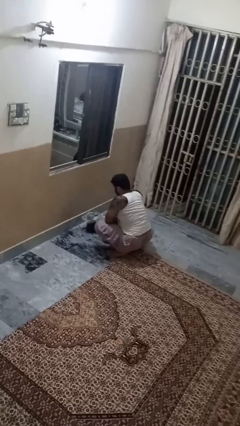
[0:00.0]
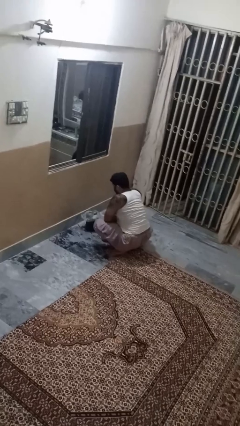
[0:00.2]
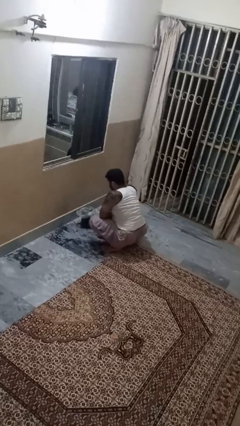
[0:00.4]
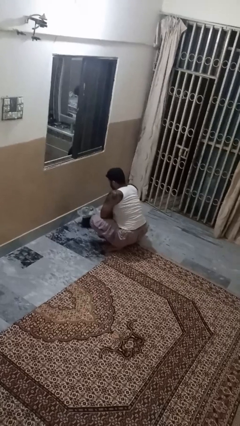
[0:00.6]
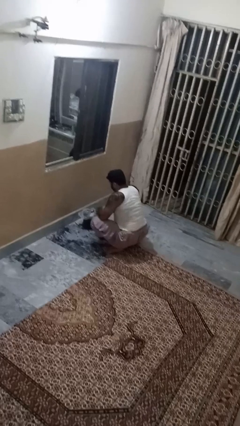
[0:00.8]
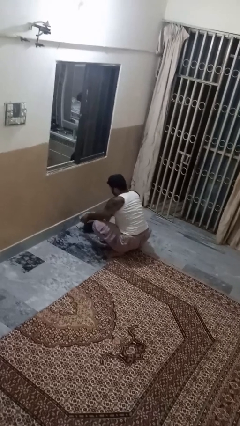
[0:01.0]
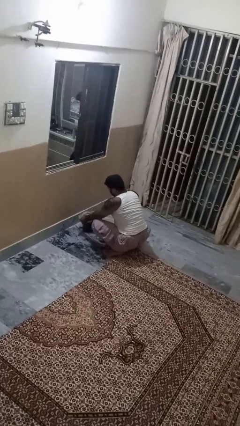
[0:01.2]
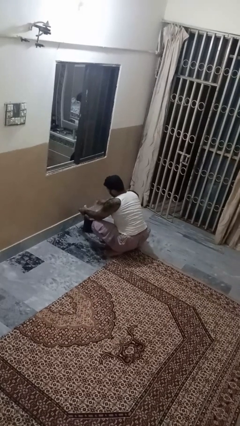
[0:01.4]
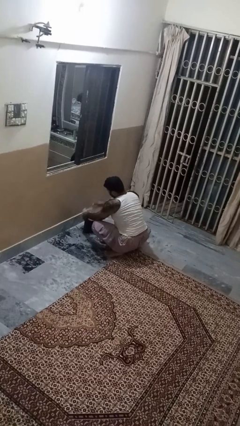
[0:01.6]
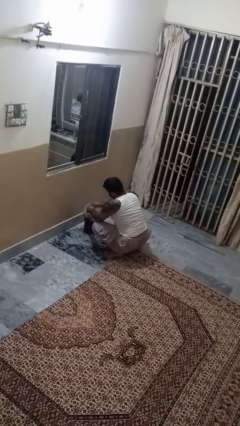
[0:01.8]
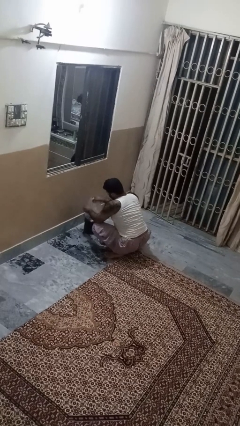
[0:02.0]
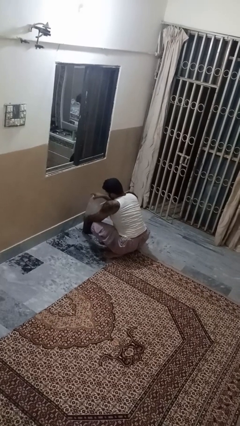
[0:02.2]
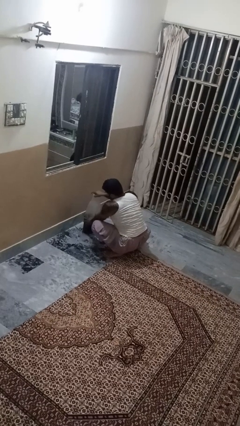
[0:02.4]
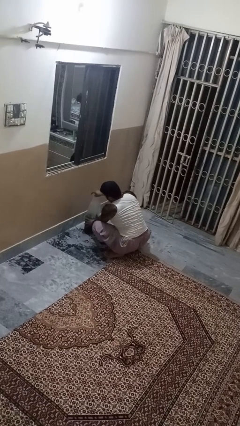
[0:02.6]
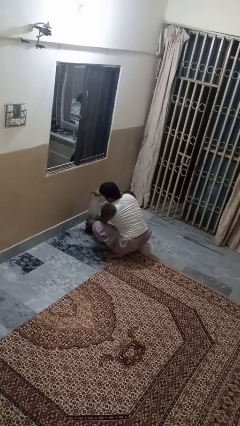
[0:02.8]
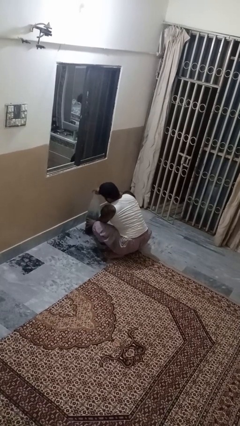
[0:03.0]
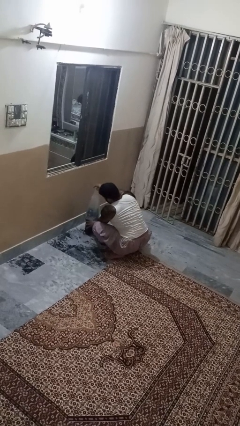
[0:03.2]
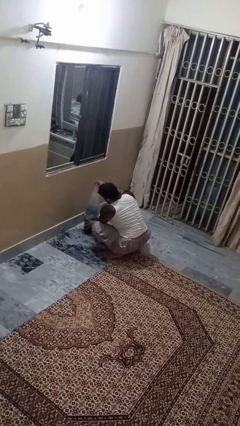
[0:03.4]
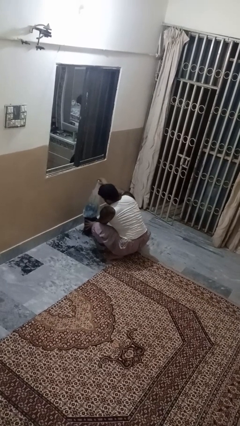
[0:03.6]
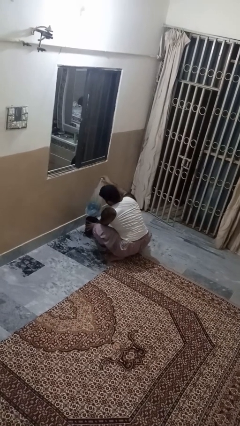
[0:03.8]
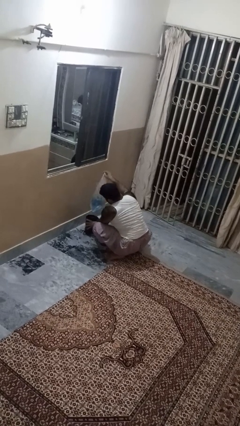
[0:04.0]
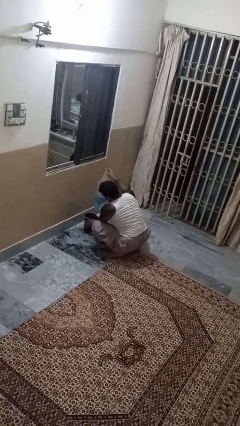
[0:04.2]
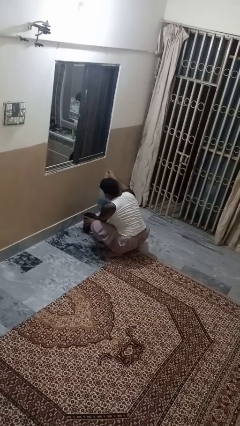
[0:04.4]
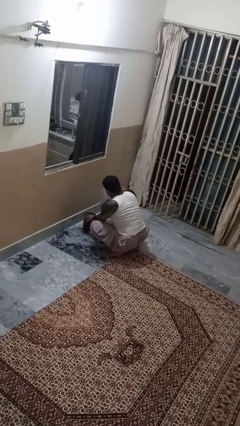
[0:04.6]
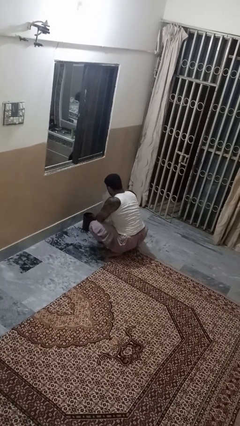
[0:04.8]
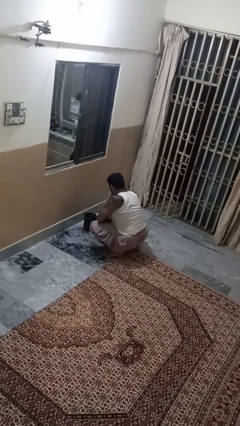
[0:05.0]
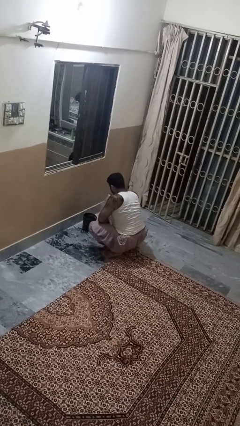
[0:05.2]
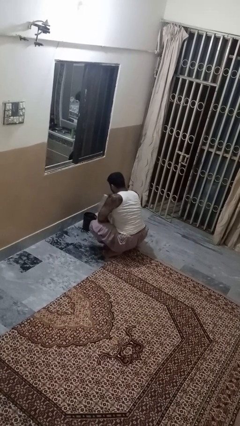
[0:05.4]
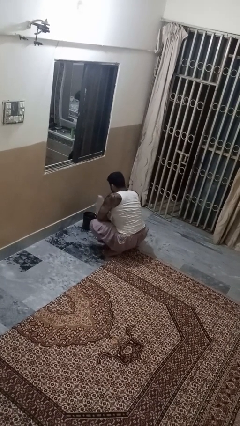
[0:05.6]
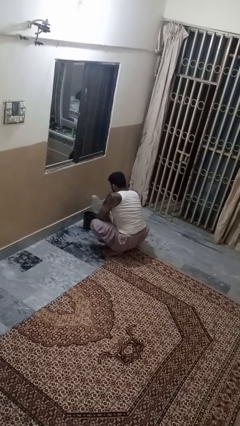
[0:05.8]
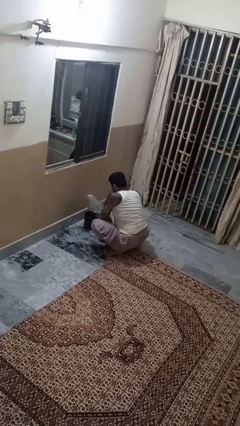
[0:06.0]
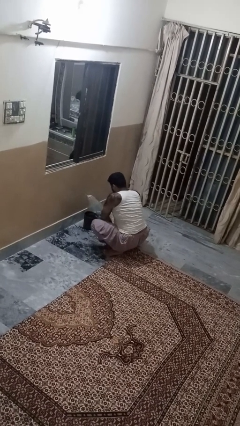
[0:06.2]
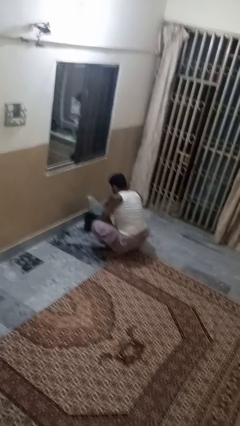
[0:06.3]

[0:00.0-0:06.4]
person removes trashbag from trashcan

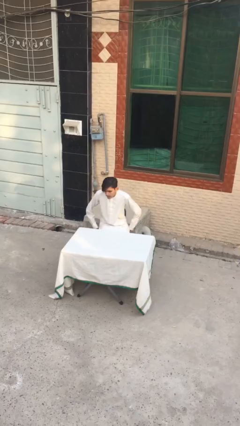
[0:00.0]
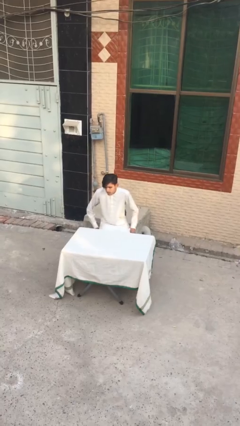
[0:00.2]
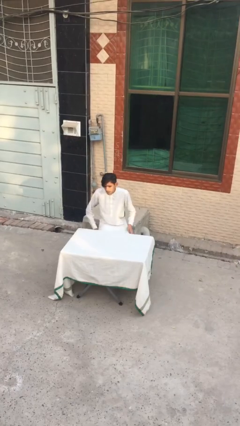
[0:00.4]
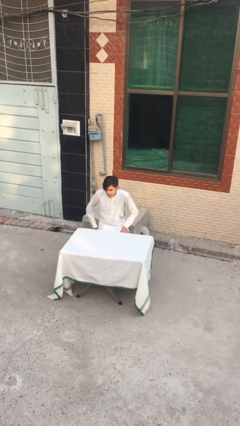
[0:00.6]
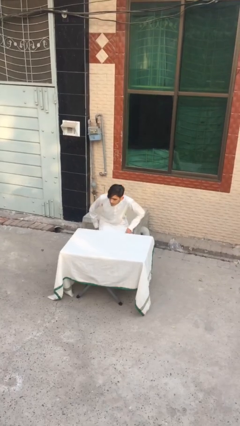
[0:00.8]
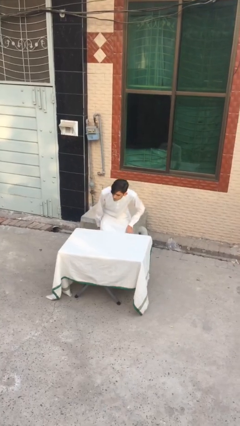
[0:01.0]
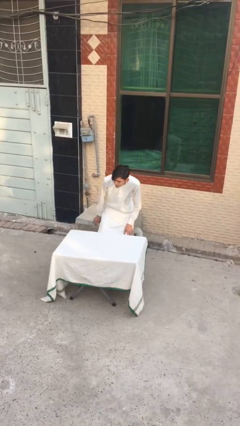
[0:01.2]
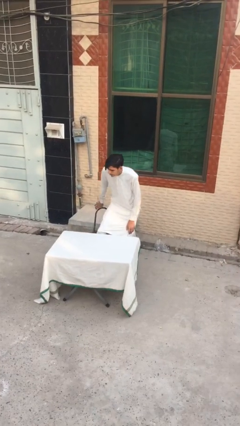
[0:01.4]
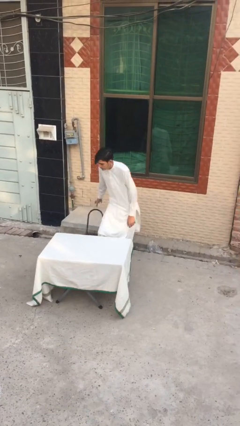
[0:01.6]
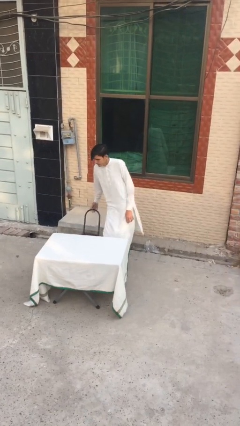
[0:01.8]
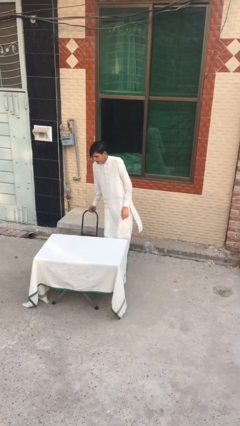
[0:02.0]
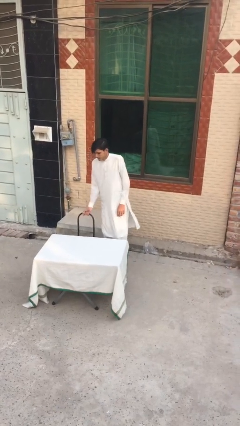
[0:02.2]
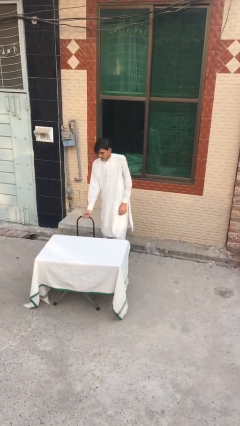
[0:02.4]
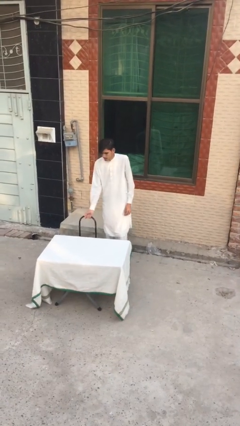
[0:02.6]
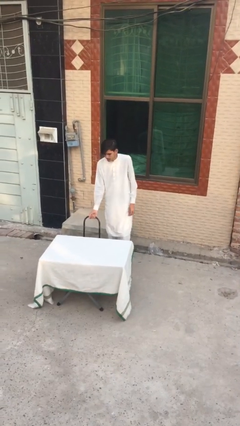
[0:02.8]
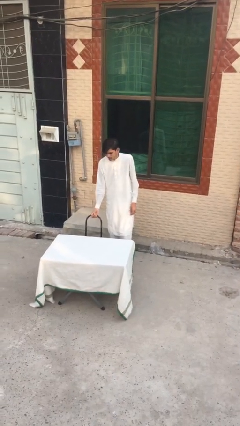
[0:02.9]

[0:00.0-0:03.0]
person stands up

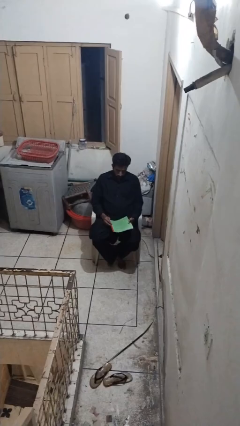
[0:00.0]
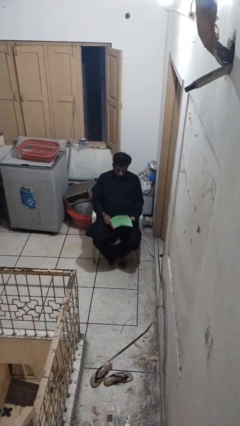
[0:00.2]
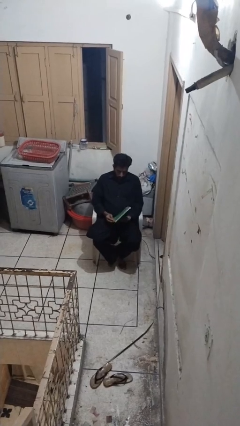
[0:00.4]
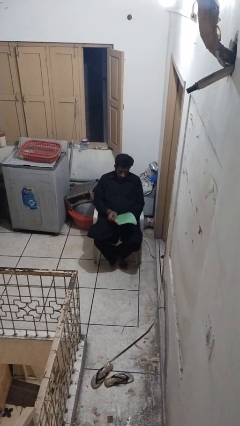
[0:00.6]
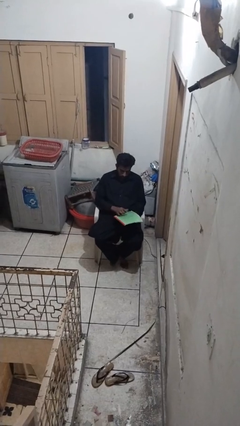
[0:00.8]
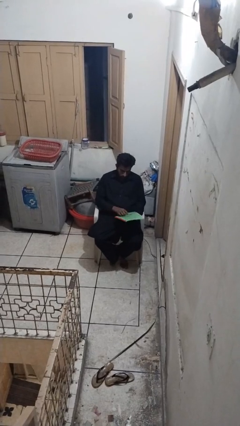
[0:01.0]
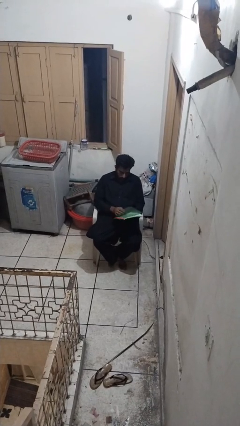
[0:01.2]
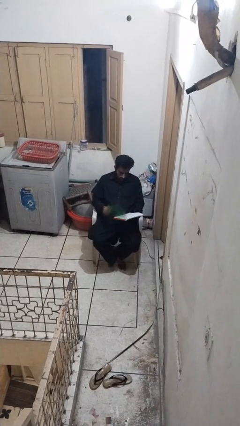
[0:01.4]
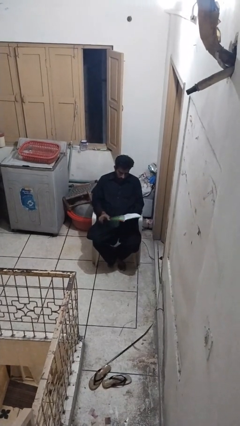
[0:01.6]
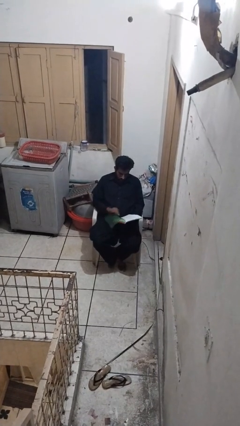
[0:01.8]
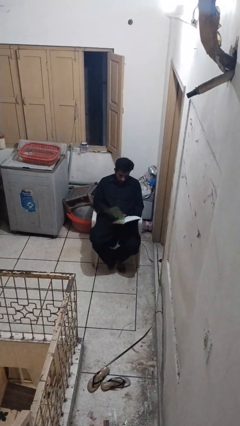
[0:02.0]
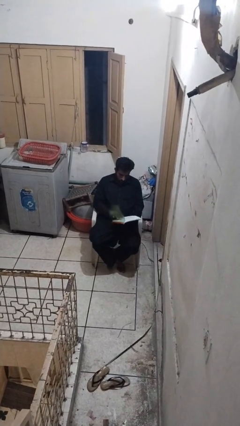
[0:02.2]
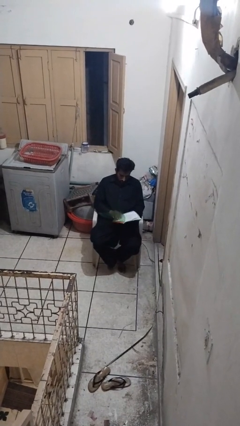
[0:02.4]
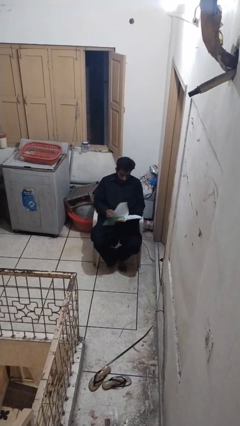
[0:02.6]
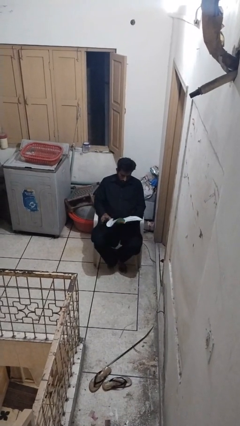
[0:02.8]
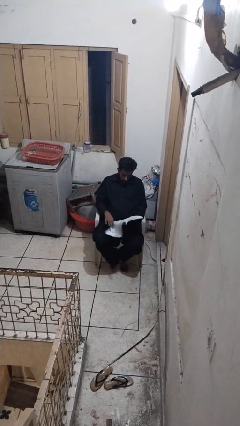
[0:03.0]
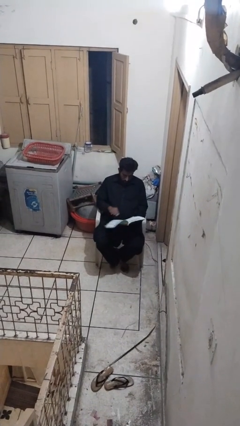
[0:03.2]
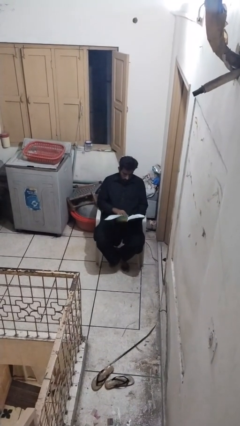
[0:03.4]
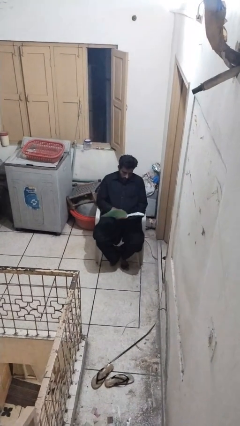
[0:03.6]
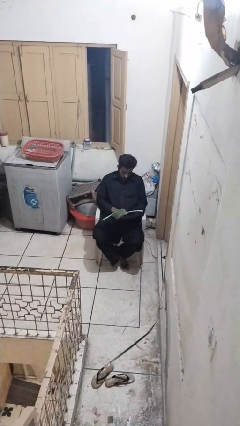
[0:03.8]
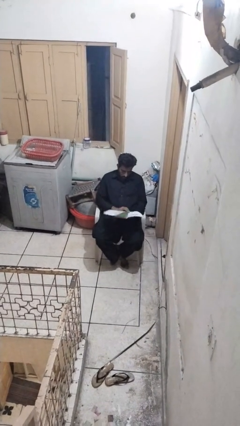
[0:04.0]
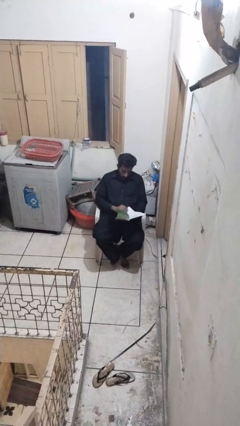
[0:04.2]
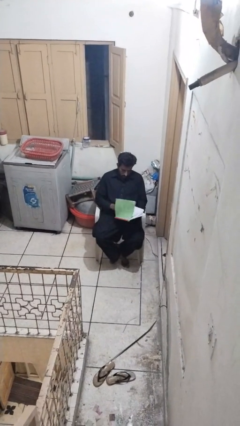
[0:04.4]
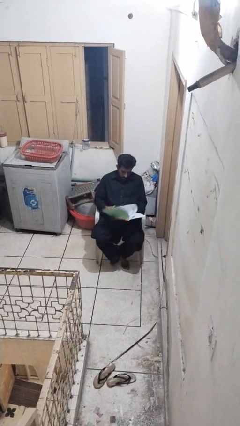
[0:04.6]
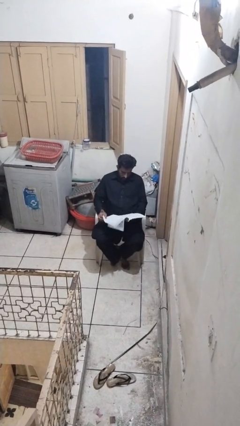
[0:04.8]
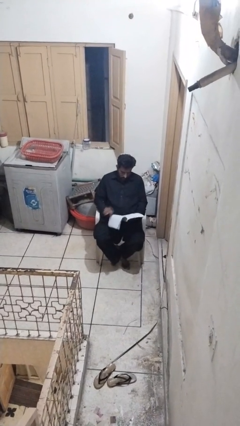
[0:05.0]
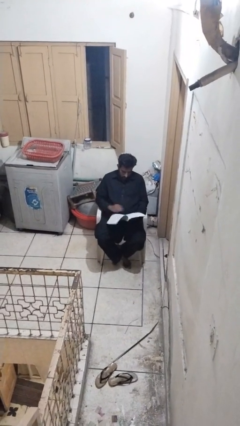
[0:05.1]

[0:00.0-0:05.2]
person reads magazine

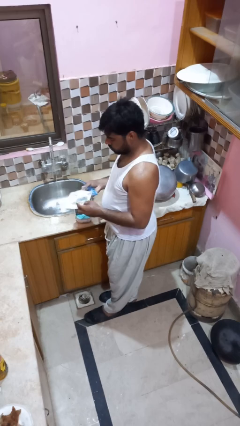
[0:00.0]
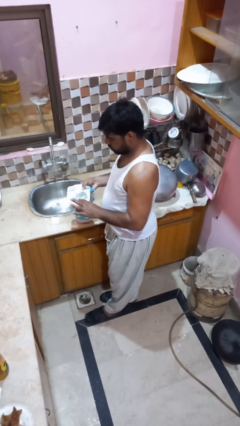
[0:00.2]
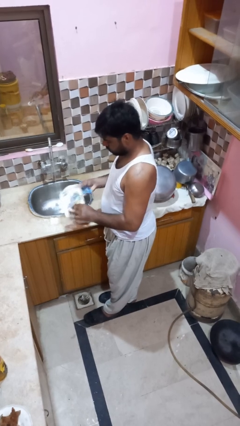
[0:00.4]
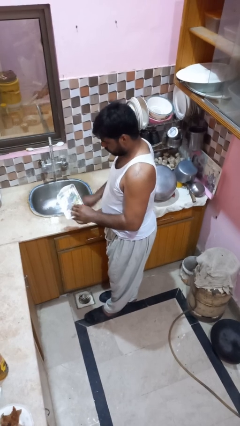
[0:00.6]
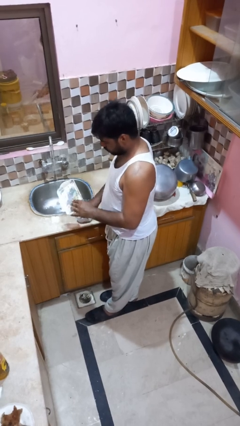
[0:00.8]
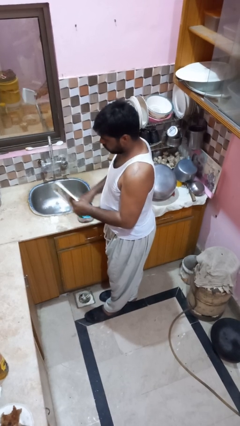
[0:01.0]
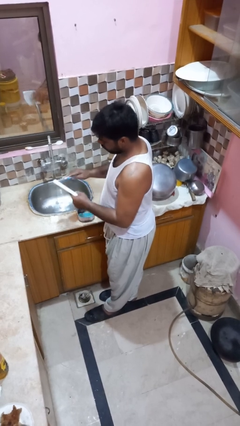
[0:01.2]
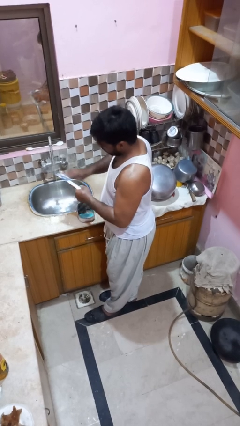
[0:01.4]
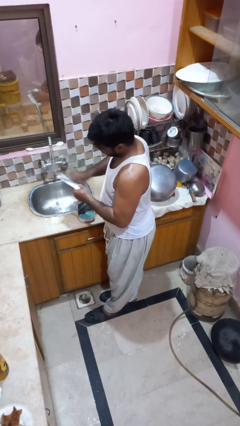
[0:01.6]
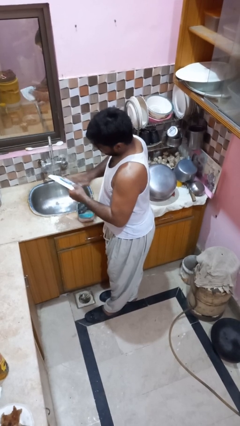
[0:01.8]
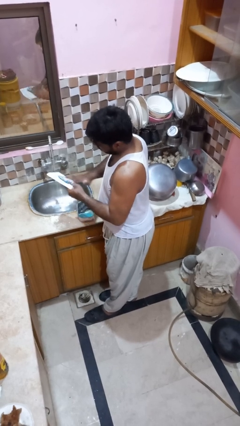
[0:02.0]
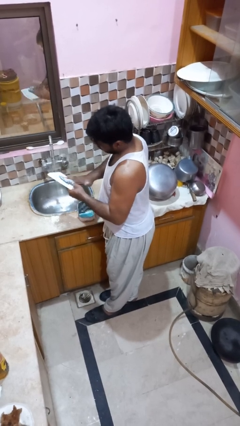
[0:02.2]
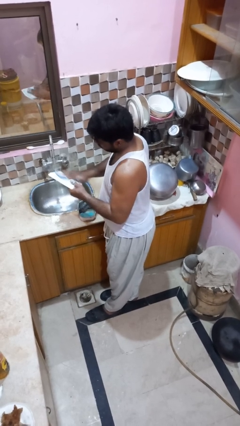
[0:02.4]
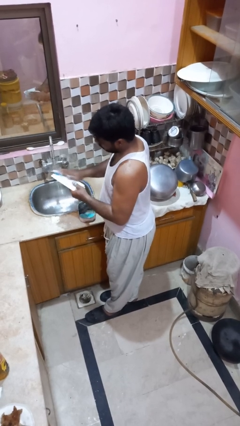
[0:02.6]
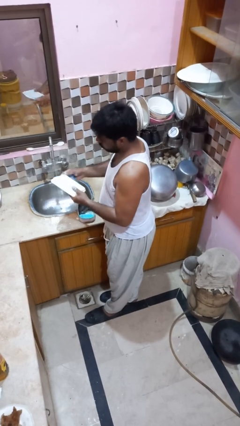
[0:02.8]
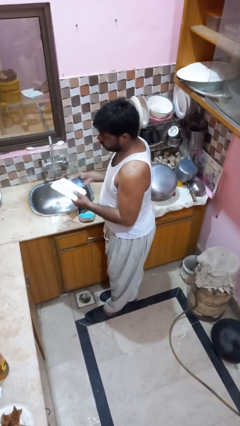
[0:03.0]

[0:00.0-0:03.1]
person washes dish
